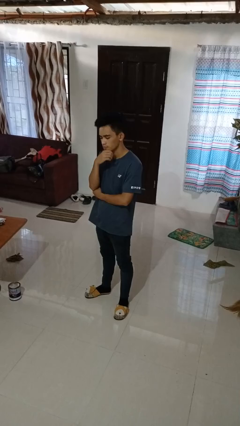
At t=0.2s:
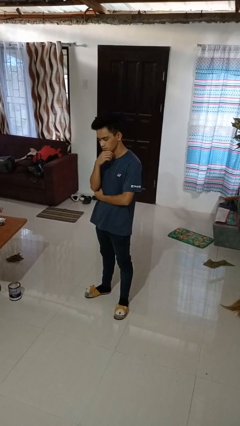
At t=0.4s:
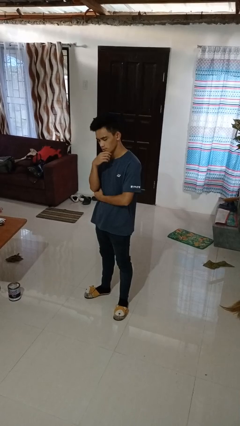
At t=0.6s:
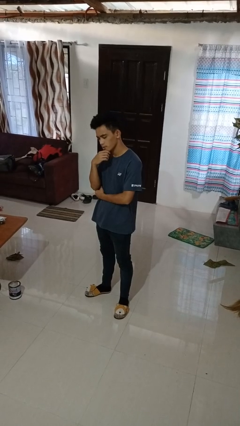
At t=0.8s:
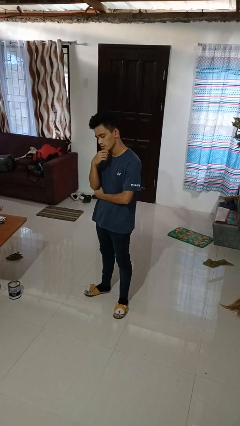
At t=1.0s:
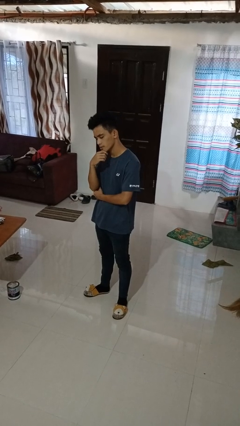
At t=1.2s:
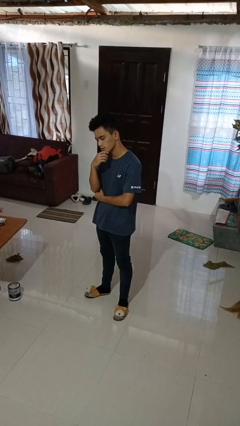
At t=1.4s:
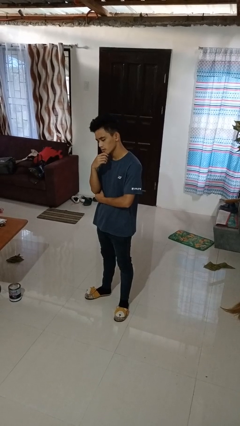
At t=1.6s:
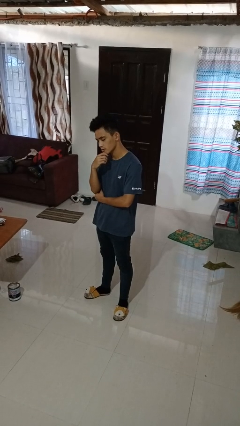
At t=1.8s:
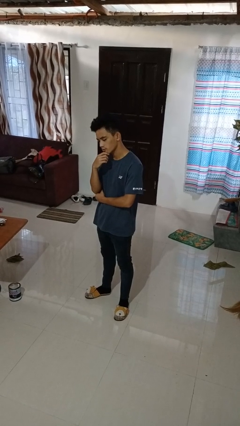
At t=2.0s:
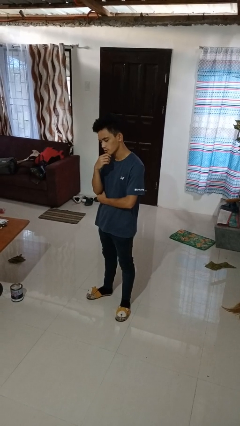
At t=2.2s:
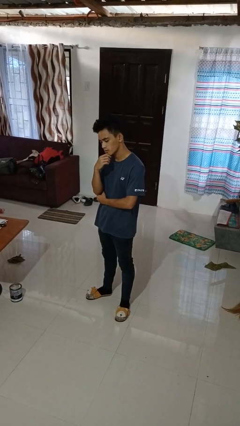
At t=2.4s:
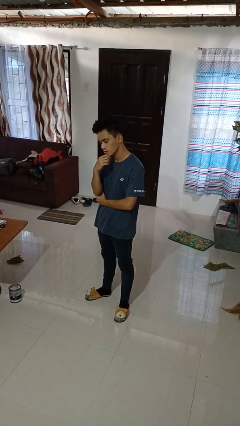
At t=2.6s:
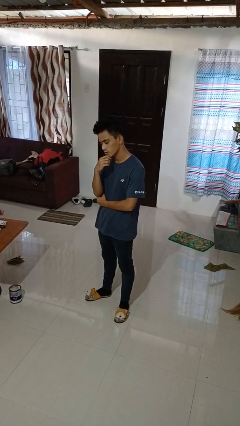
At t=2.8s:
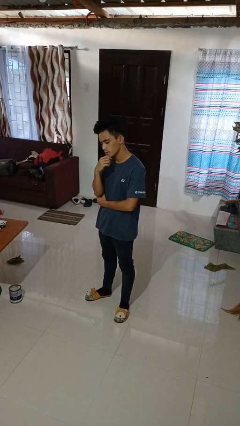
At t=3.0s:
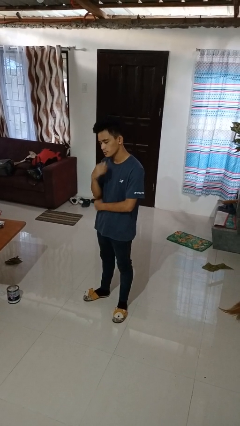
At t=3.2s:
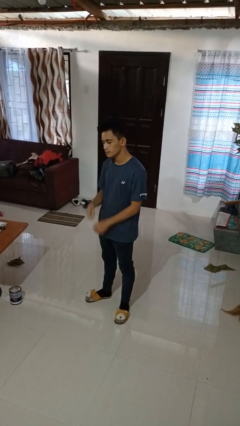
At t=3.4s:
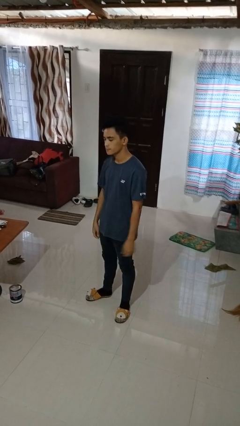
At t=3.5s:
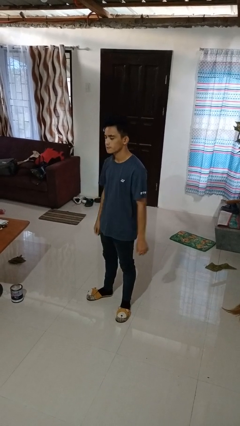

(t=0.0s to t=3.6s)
person strokes chin

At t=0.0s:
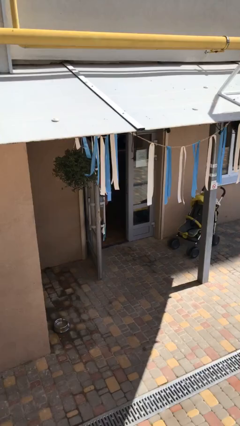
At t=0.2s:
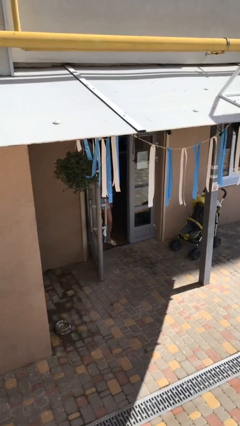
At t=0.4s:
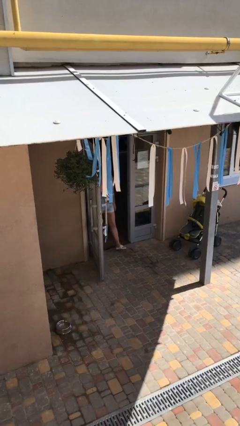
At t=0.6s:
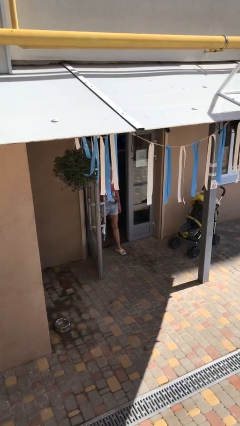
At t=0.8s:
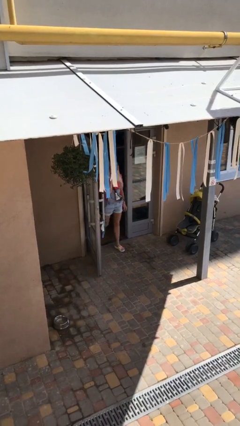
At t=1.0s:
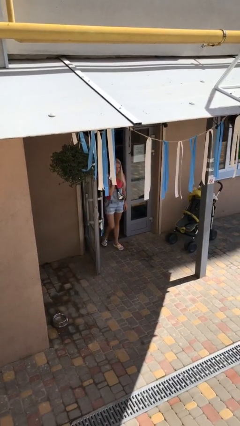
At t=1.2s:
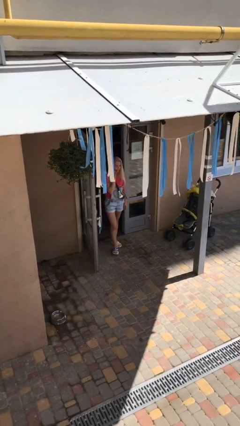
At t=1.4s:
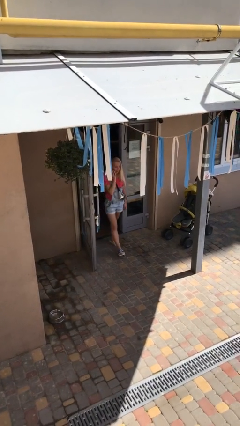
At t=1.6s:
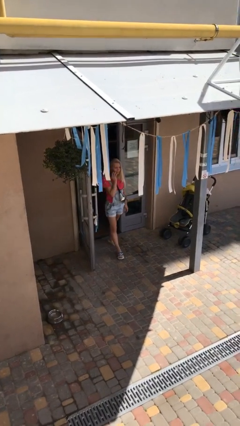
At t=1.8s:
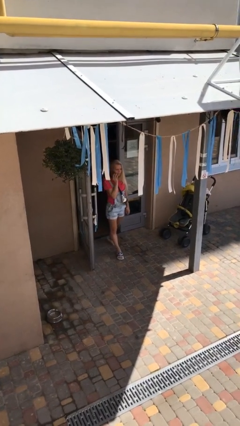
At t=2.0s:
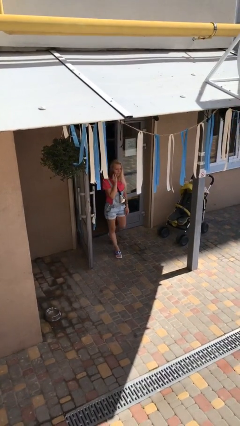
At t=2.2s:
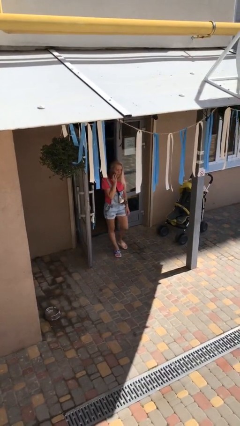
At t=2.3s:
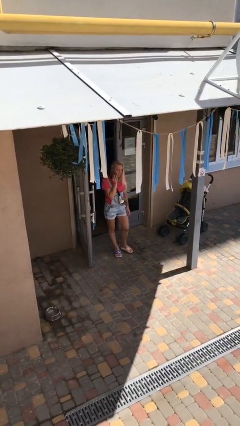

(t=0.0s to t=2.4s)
person enters scene through structure

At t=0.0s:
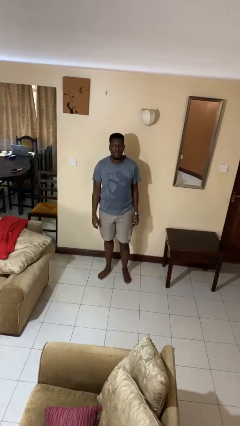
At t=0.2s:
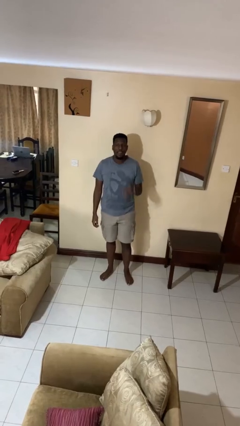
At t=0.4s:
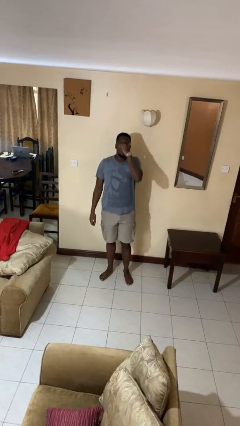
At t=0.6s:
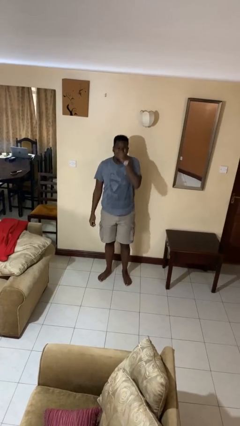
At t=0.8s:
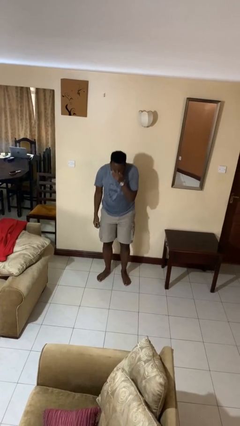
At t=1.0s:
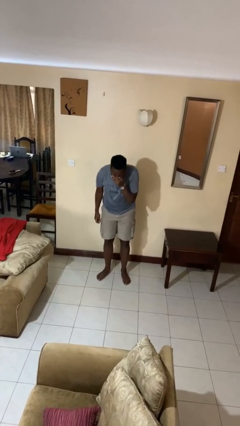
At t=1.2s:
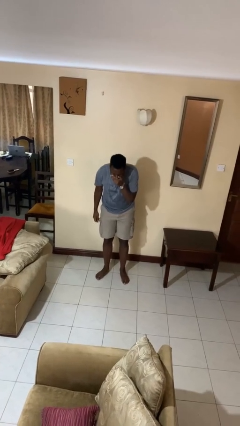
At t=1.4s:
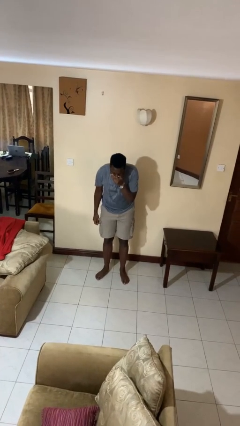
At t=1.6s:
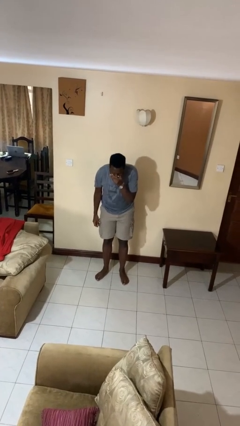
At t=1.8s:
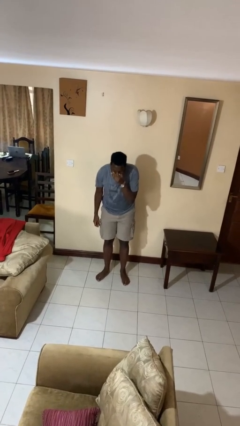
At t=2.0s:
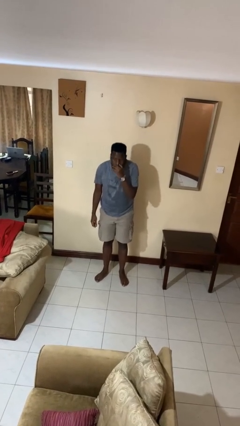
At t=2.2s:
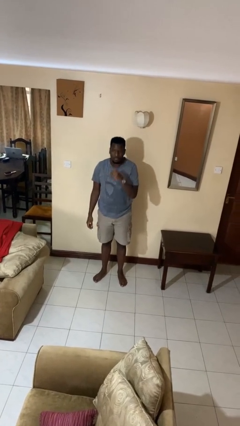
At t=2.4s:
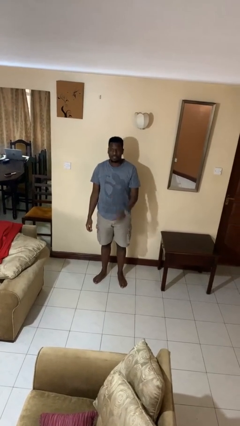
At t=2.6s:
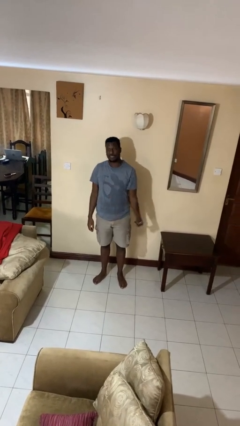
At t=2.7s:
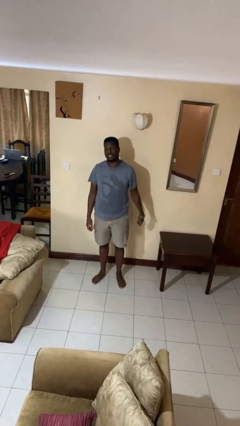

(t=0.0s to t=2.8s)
person sneezes into hand

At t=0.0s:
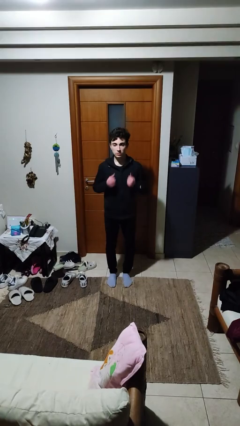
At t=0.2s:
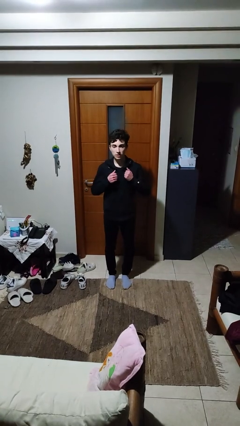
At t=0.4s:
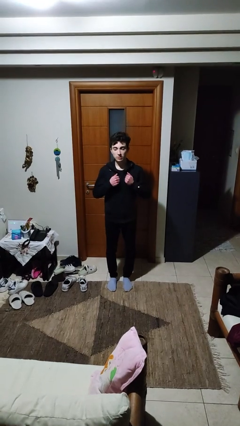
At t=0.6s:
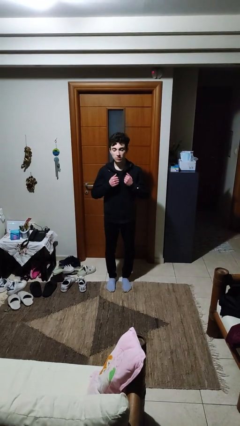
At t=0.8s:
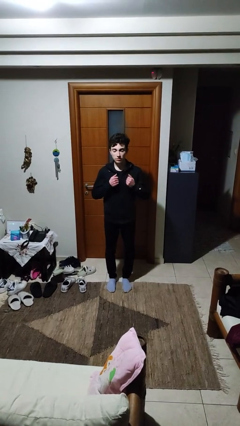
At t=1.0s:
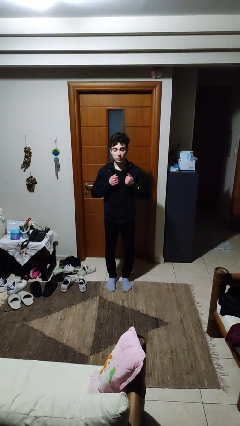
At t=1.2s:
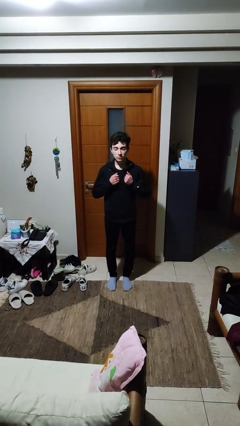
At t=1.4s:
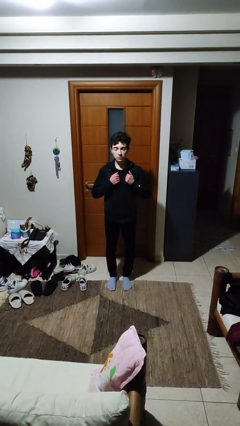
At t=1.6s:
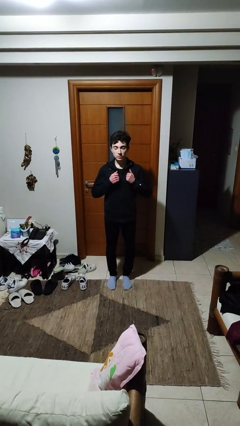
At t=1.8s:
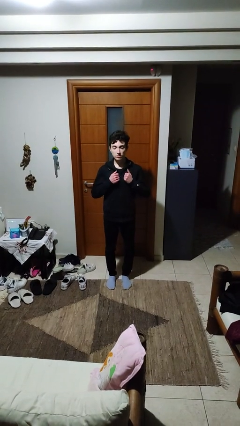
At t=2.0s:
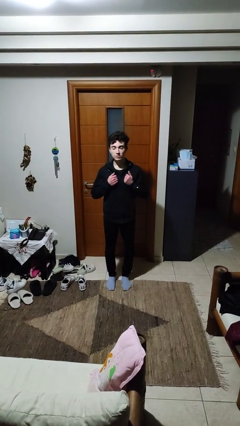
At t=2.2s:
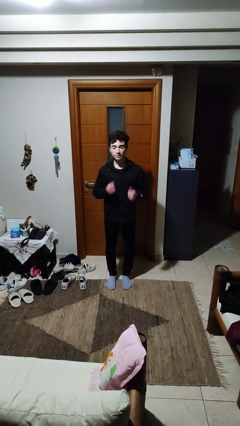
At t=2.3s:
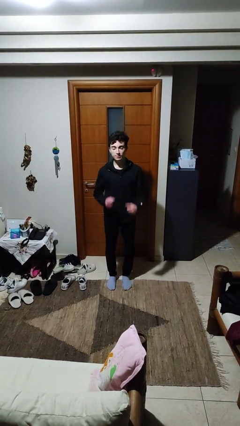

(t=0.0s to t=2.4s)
person drums on chest

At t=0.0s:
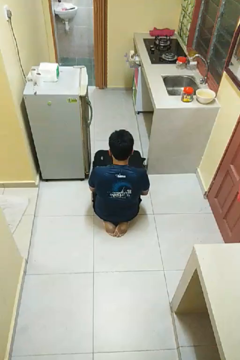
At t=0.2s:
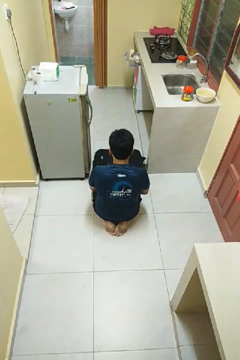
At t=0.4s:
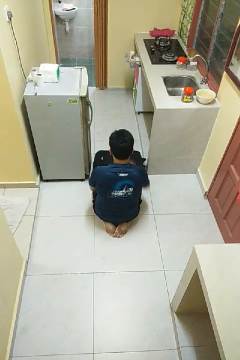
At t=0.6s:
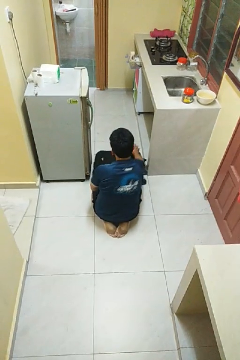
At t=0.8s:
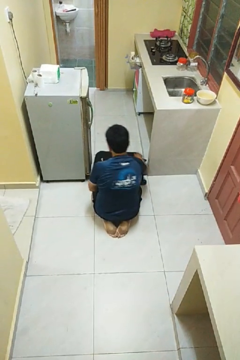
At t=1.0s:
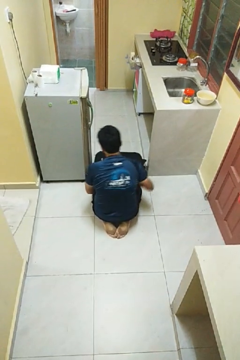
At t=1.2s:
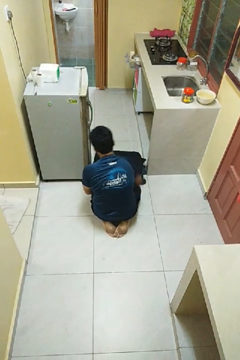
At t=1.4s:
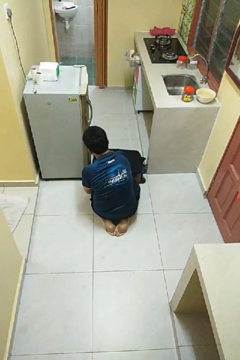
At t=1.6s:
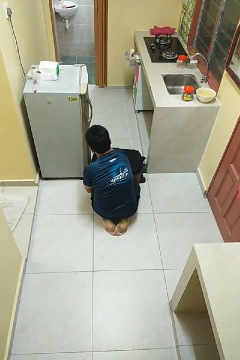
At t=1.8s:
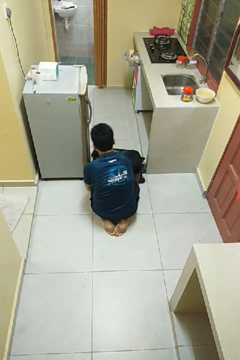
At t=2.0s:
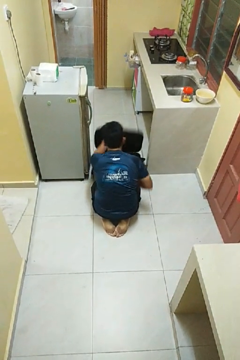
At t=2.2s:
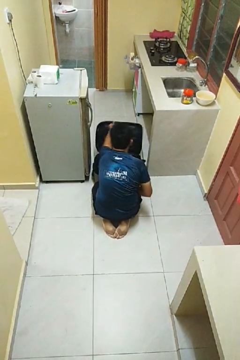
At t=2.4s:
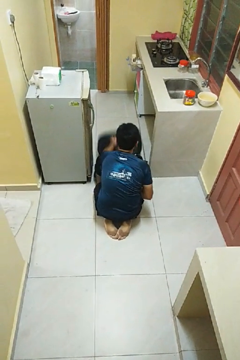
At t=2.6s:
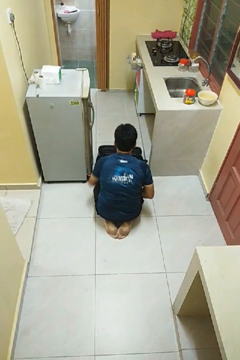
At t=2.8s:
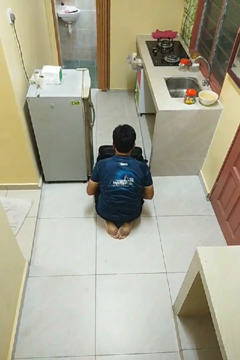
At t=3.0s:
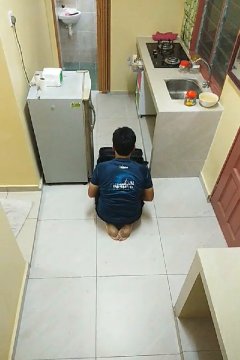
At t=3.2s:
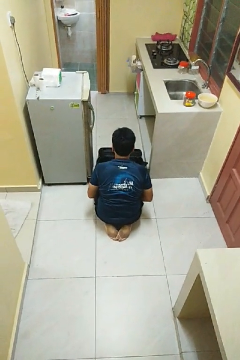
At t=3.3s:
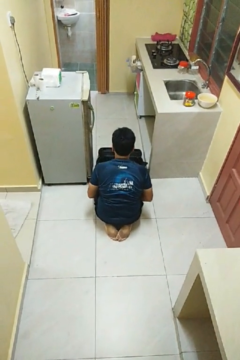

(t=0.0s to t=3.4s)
person opens suitcase

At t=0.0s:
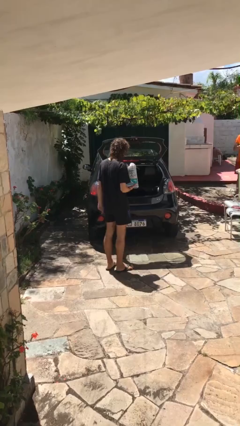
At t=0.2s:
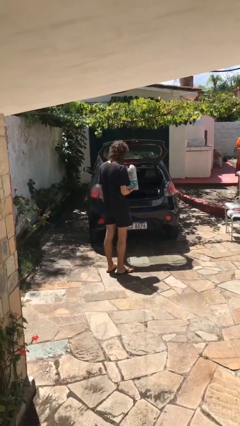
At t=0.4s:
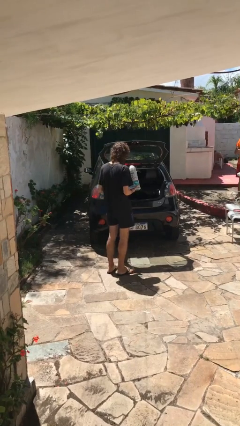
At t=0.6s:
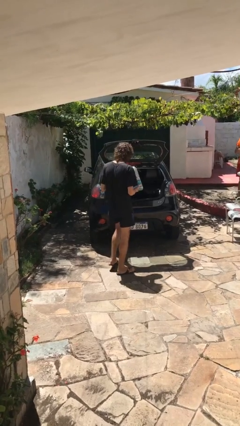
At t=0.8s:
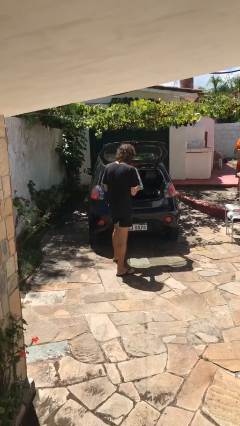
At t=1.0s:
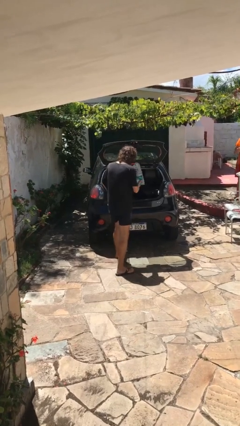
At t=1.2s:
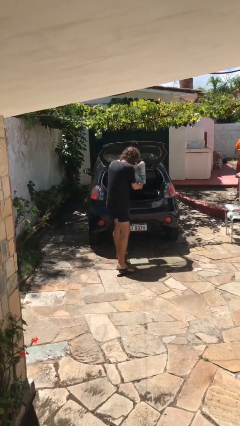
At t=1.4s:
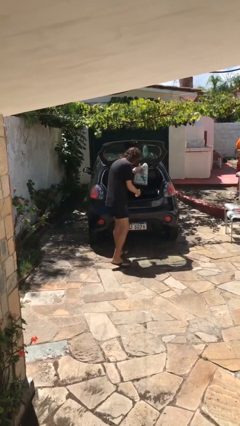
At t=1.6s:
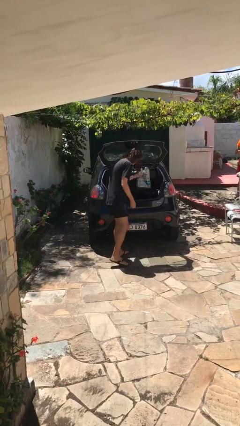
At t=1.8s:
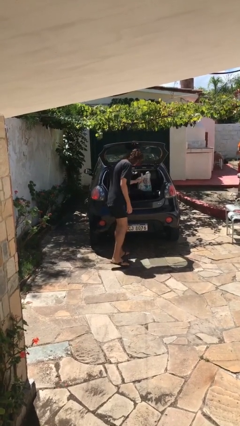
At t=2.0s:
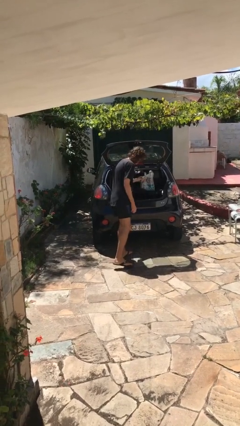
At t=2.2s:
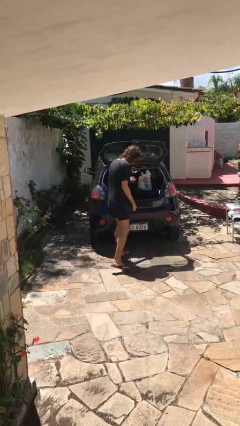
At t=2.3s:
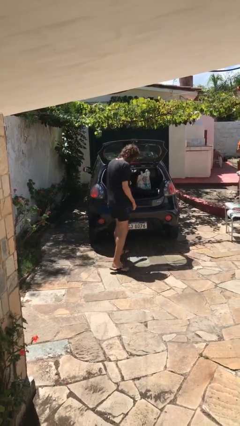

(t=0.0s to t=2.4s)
person loads car

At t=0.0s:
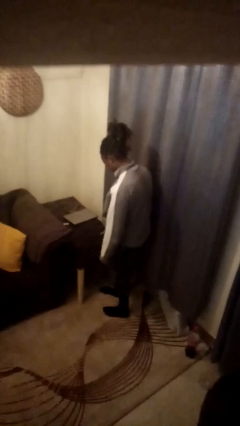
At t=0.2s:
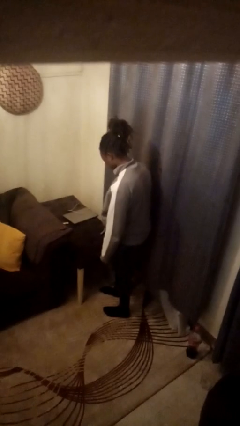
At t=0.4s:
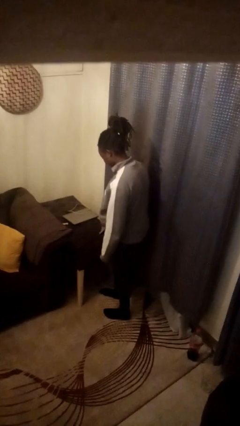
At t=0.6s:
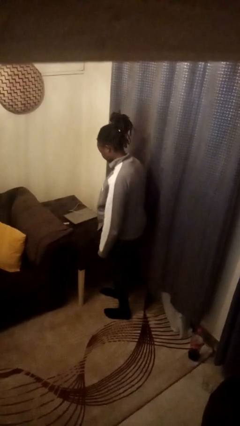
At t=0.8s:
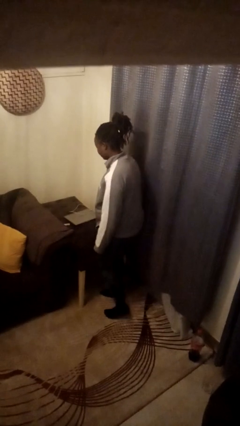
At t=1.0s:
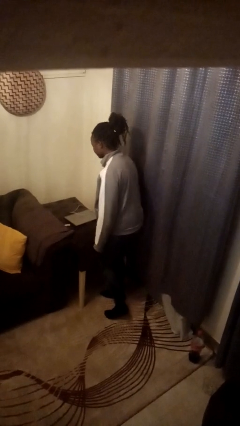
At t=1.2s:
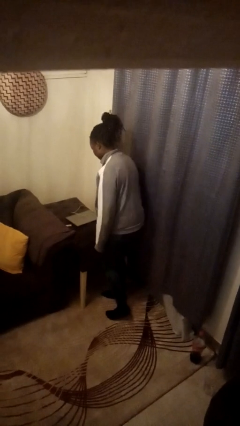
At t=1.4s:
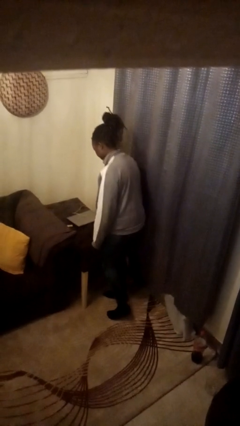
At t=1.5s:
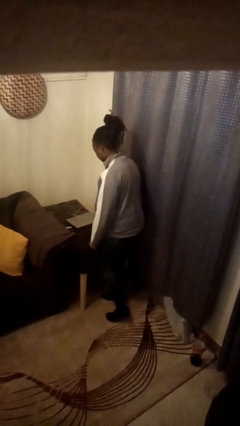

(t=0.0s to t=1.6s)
person bumps into table
